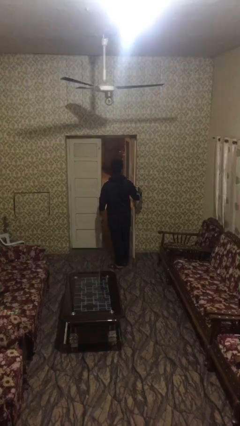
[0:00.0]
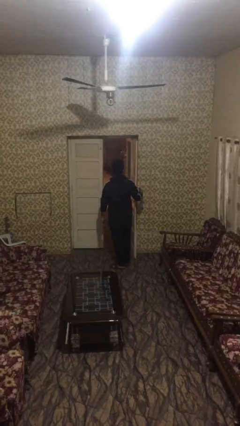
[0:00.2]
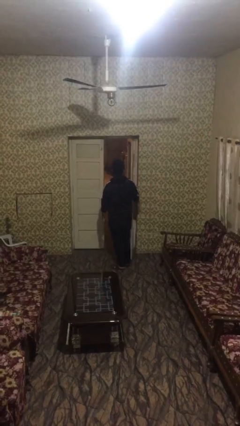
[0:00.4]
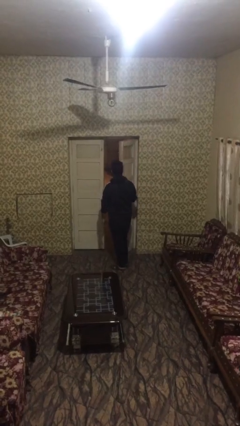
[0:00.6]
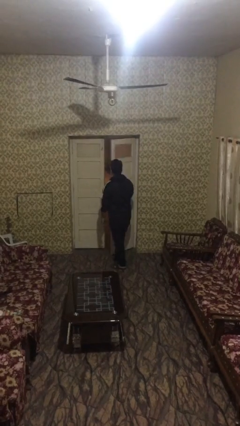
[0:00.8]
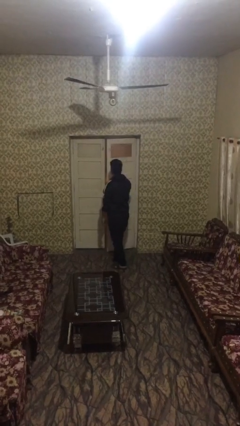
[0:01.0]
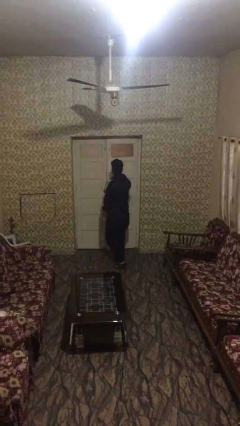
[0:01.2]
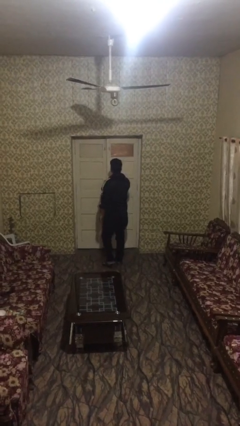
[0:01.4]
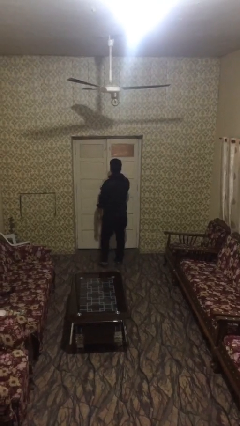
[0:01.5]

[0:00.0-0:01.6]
person closes facility door

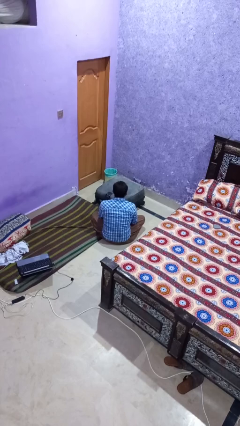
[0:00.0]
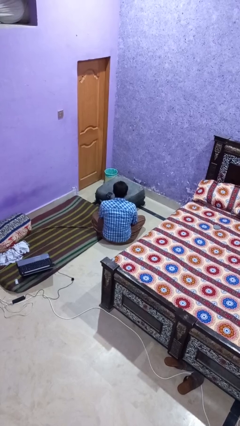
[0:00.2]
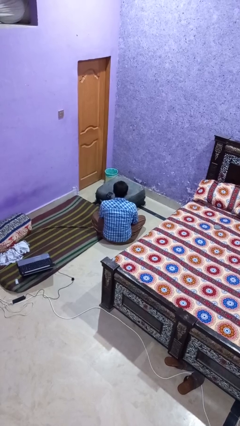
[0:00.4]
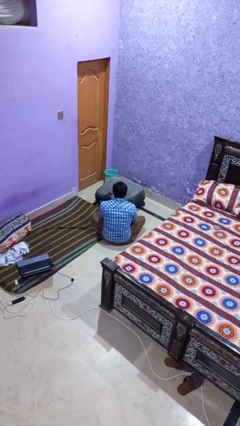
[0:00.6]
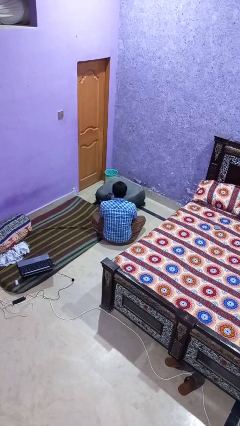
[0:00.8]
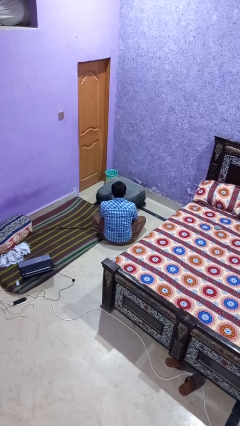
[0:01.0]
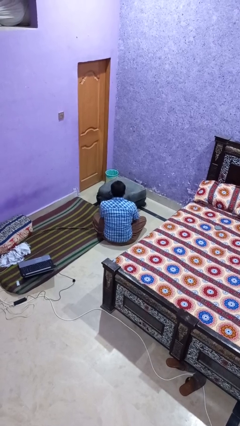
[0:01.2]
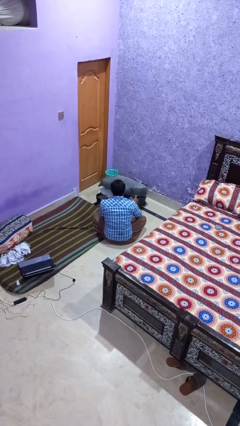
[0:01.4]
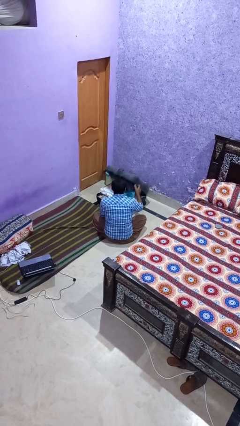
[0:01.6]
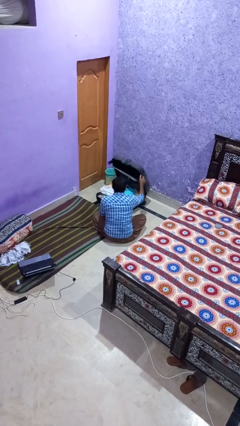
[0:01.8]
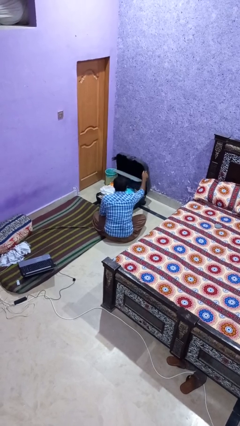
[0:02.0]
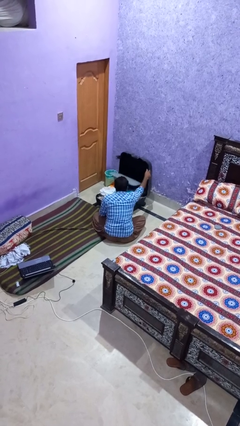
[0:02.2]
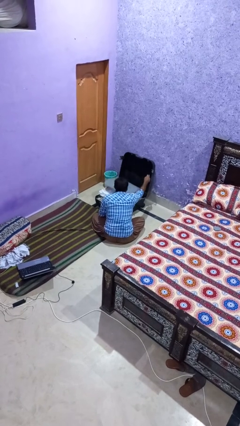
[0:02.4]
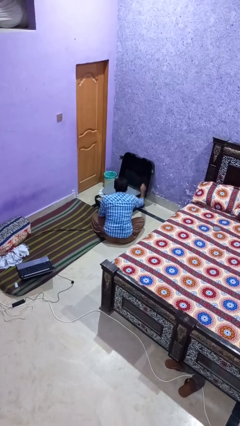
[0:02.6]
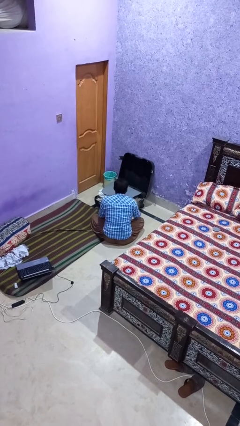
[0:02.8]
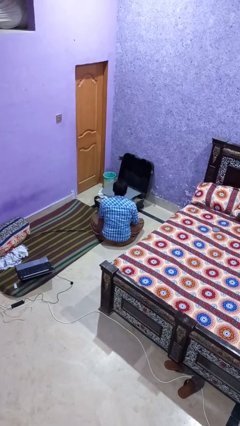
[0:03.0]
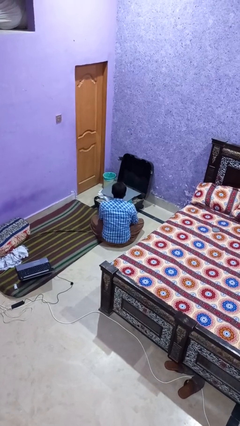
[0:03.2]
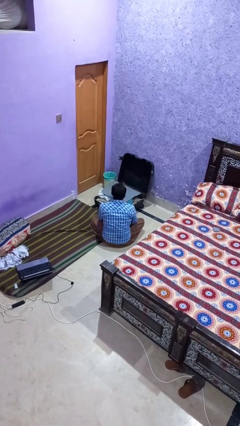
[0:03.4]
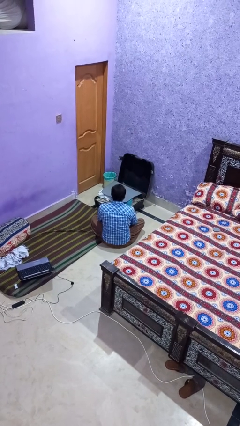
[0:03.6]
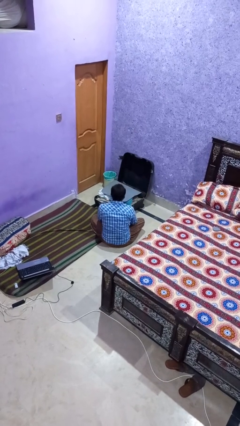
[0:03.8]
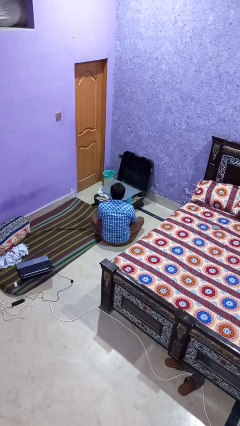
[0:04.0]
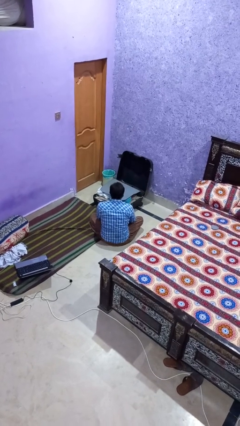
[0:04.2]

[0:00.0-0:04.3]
person opens suitcase

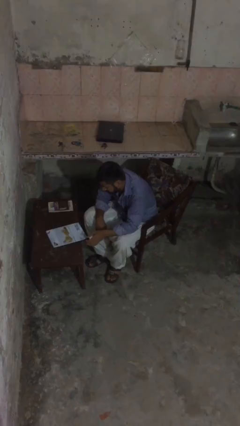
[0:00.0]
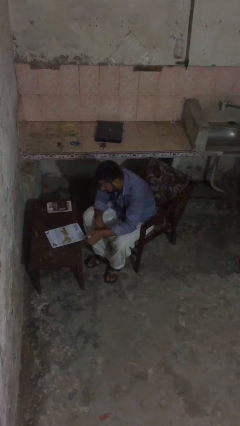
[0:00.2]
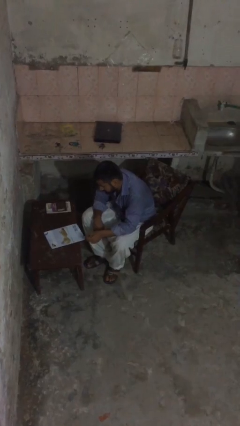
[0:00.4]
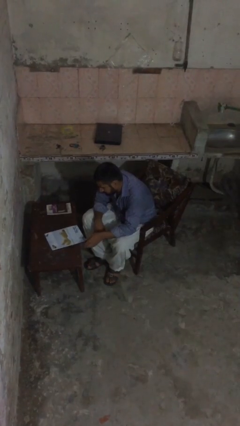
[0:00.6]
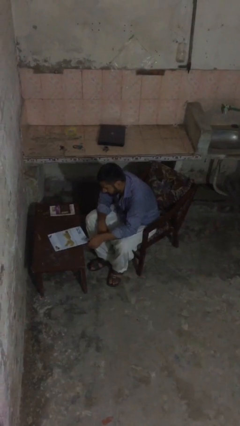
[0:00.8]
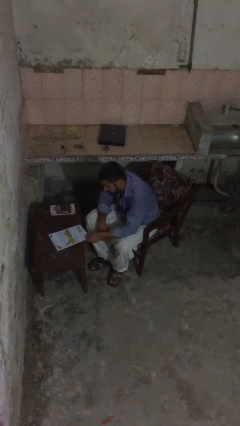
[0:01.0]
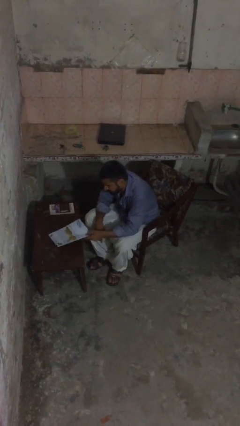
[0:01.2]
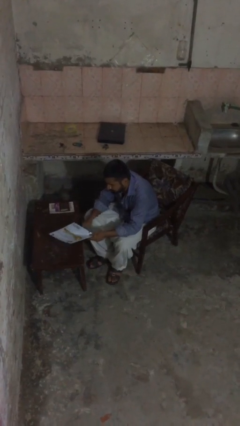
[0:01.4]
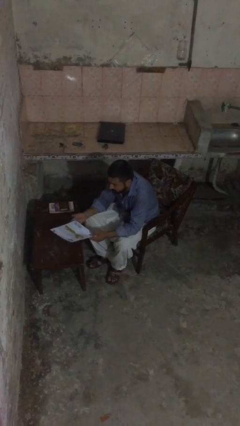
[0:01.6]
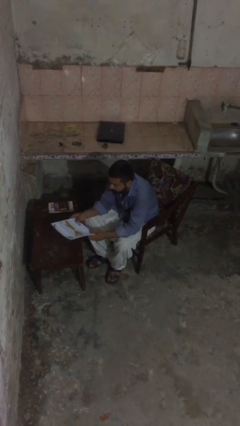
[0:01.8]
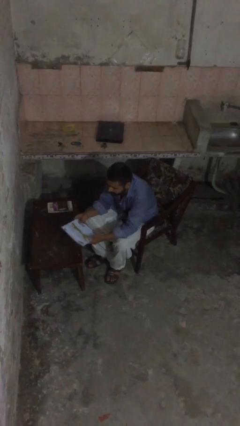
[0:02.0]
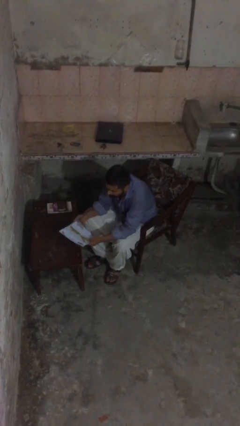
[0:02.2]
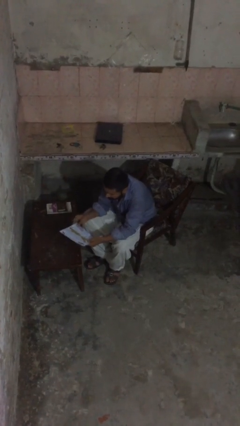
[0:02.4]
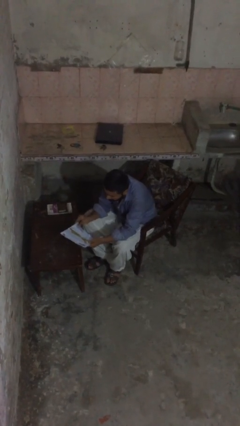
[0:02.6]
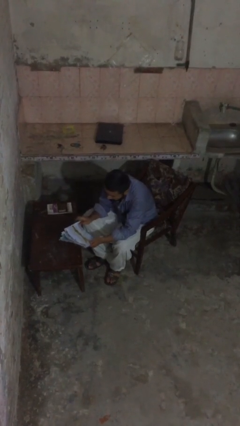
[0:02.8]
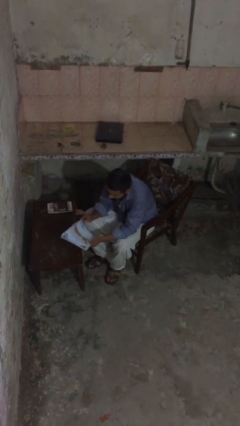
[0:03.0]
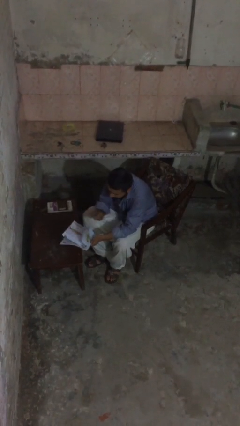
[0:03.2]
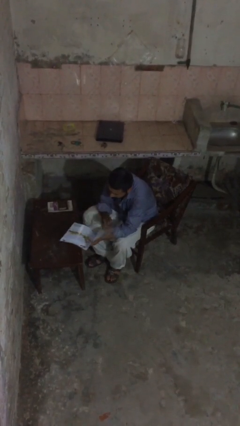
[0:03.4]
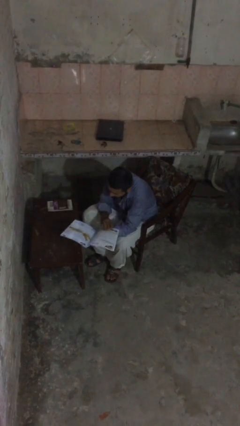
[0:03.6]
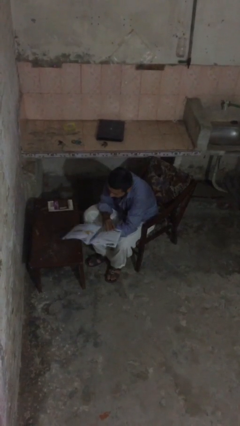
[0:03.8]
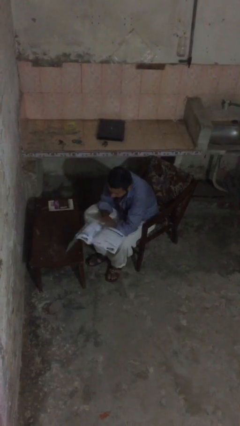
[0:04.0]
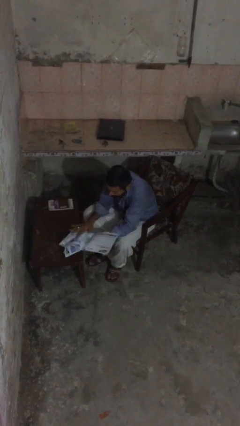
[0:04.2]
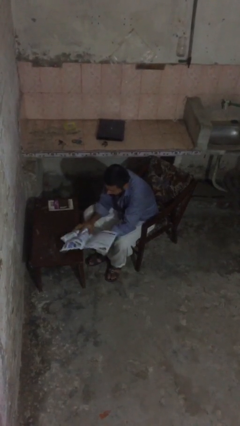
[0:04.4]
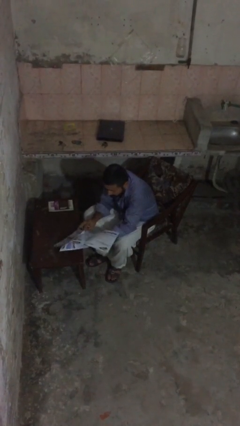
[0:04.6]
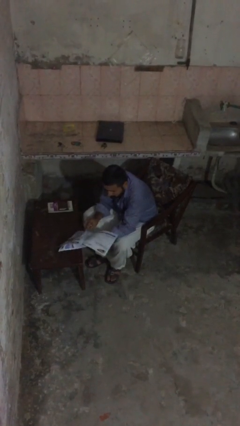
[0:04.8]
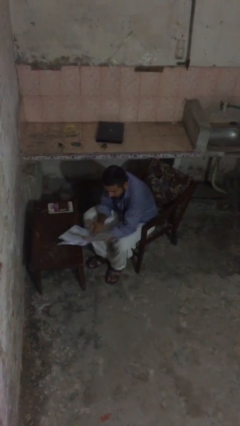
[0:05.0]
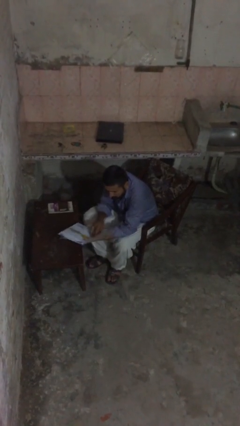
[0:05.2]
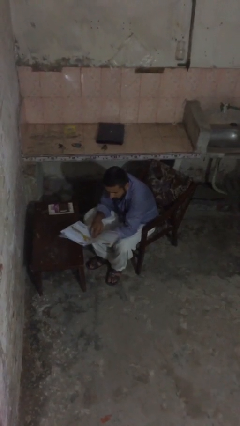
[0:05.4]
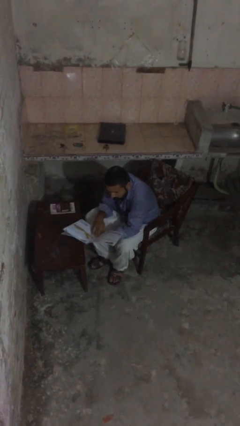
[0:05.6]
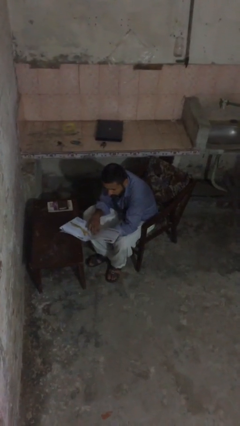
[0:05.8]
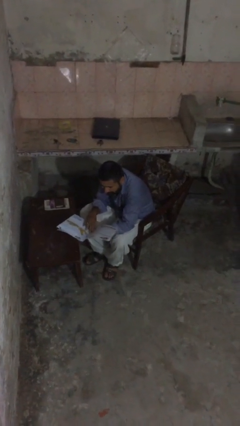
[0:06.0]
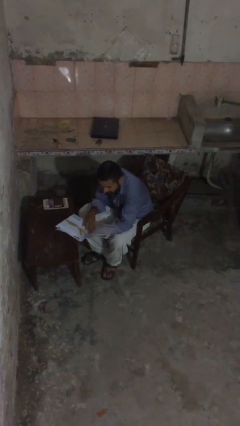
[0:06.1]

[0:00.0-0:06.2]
person reads document

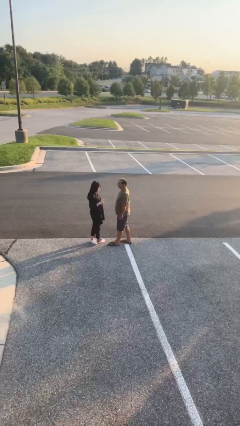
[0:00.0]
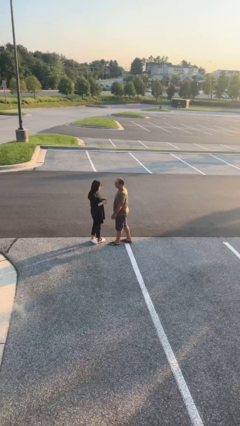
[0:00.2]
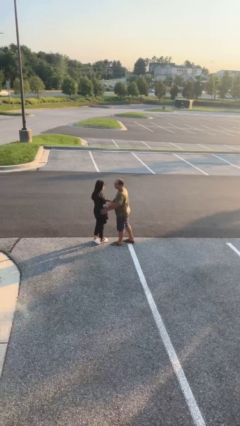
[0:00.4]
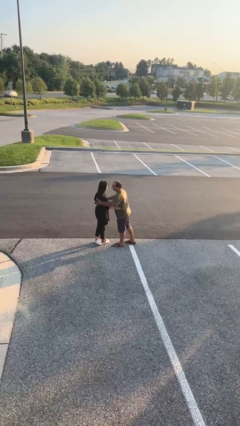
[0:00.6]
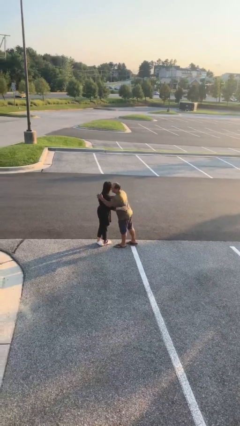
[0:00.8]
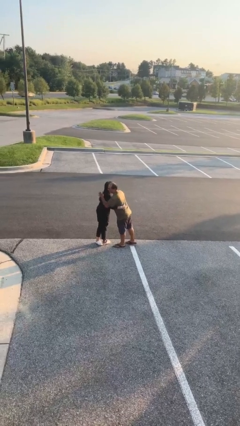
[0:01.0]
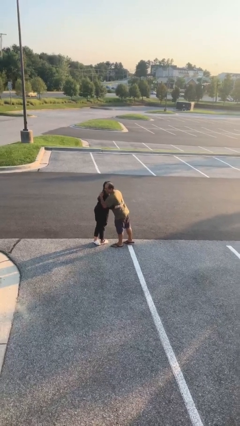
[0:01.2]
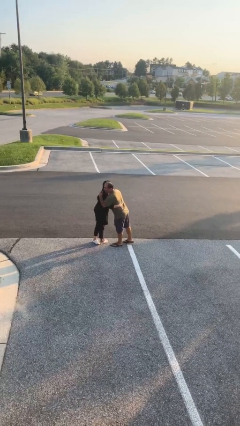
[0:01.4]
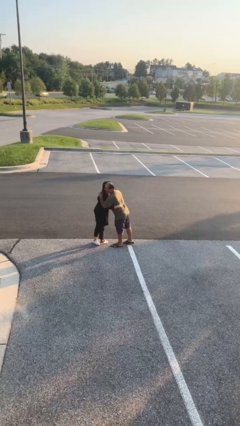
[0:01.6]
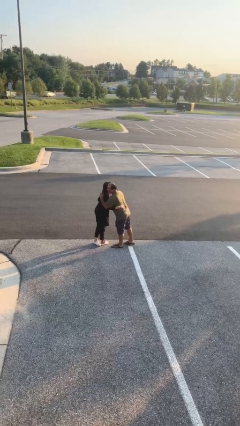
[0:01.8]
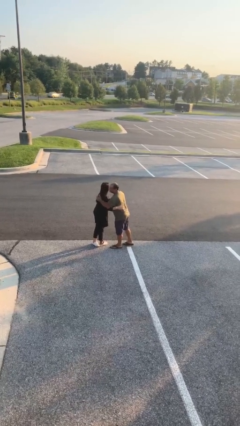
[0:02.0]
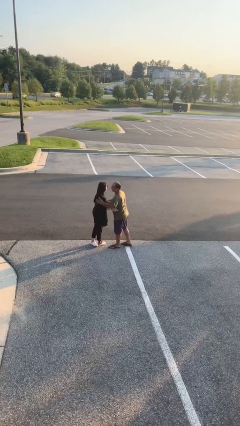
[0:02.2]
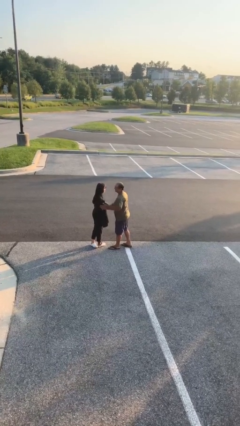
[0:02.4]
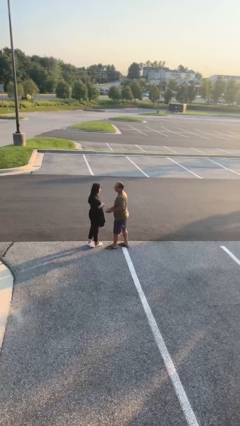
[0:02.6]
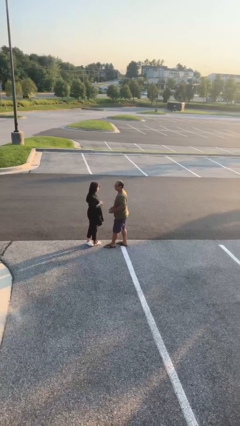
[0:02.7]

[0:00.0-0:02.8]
person embraces person

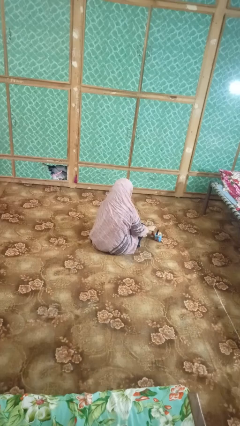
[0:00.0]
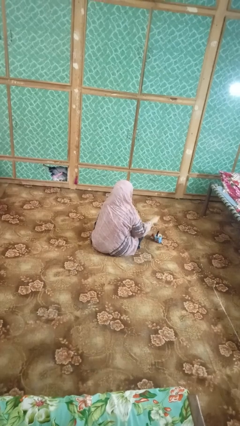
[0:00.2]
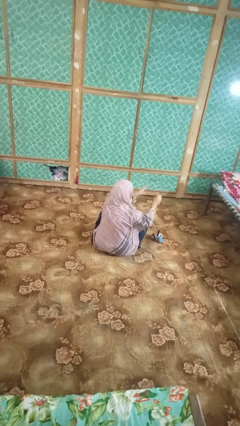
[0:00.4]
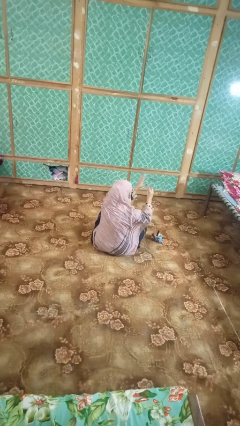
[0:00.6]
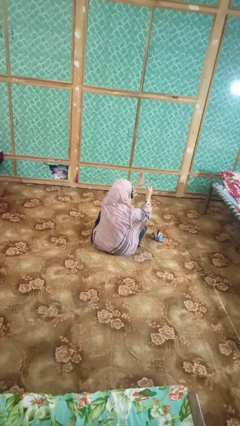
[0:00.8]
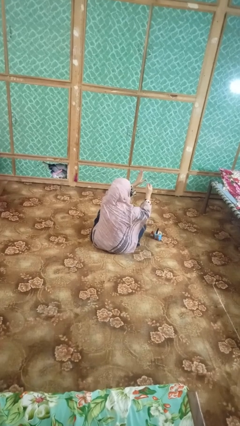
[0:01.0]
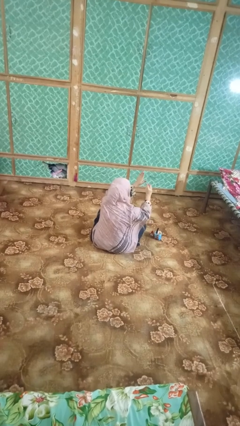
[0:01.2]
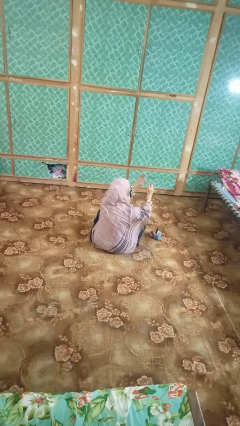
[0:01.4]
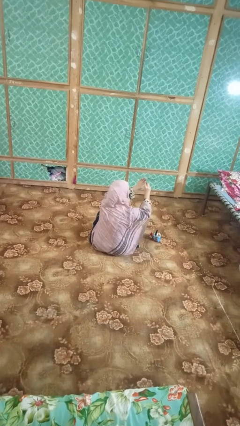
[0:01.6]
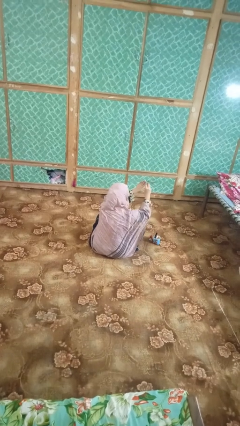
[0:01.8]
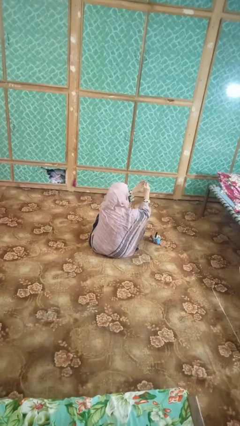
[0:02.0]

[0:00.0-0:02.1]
person paints fingernails

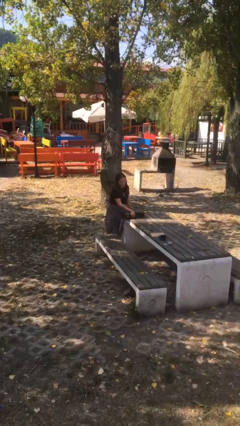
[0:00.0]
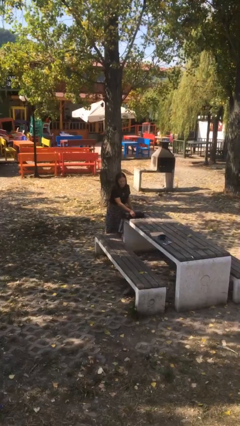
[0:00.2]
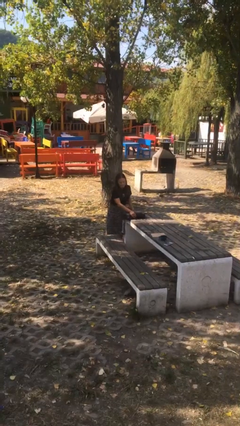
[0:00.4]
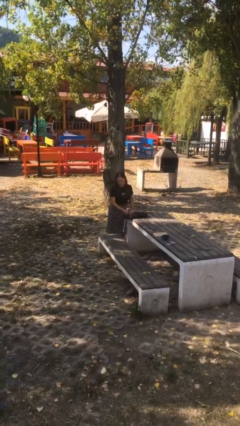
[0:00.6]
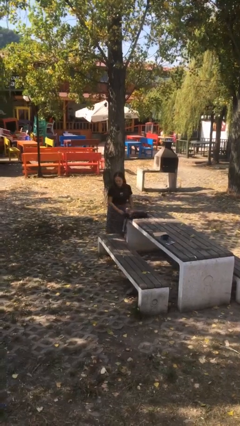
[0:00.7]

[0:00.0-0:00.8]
person puts down object on table
